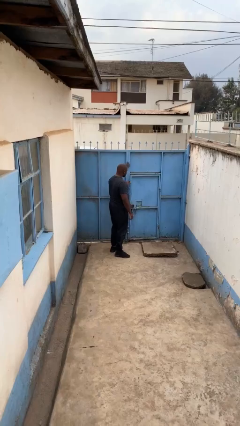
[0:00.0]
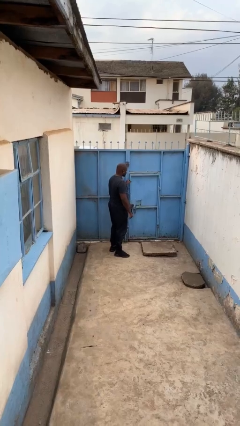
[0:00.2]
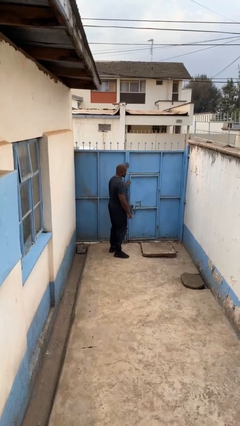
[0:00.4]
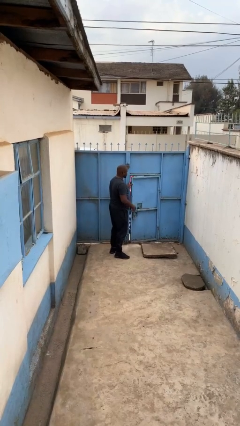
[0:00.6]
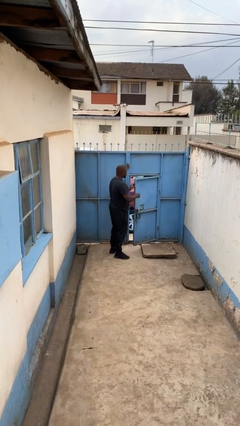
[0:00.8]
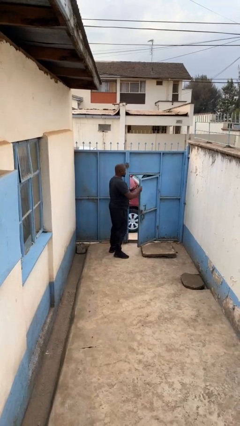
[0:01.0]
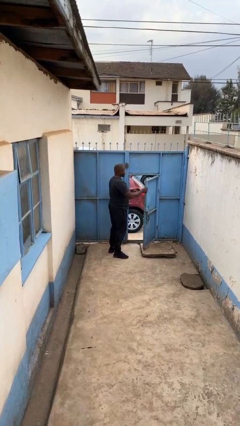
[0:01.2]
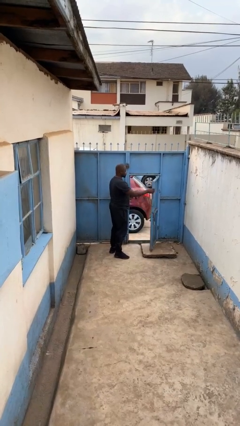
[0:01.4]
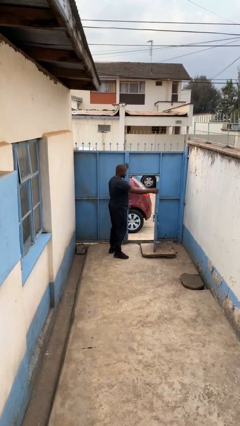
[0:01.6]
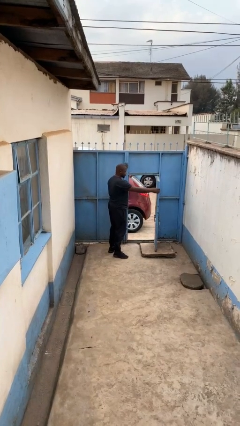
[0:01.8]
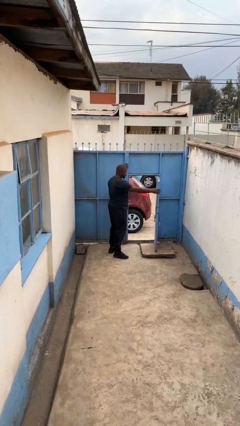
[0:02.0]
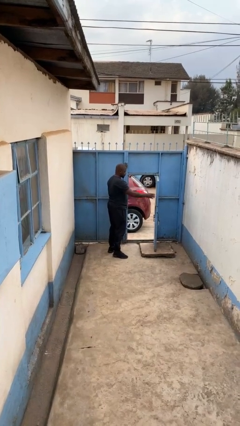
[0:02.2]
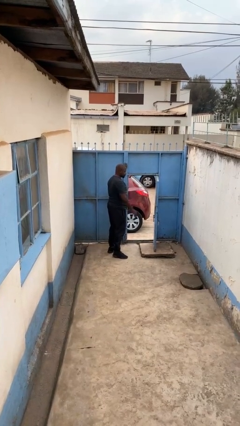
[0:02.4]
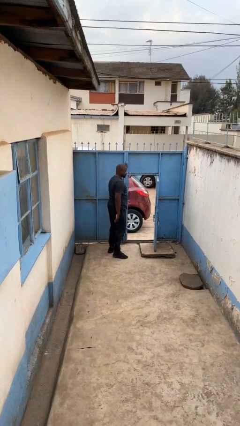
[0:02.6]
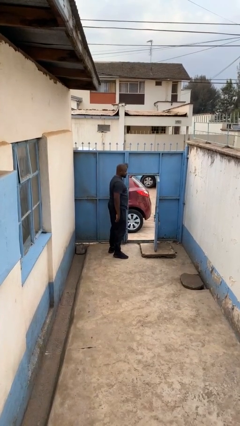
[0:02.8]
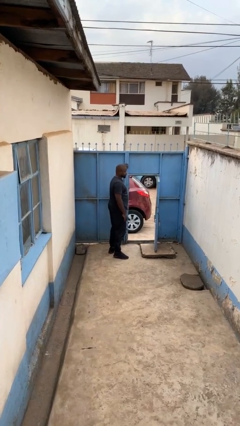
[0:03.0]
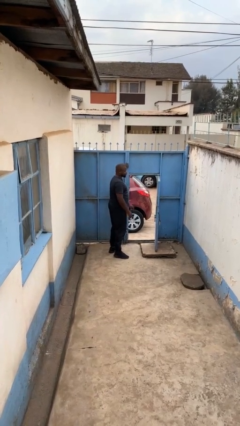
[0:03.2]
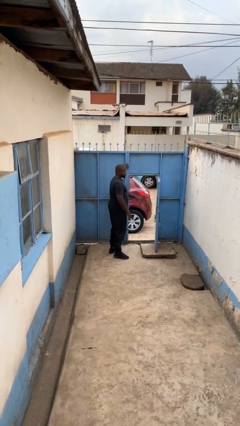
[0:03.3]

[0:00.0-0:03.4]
person opens gate

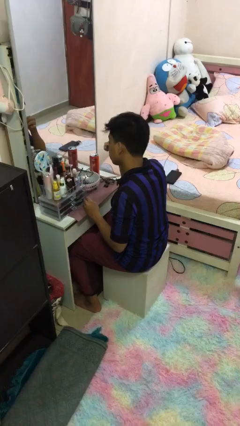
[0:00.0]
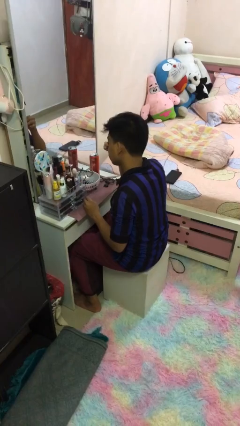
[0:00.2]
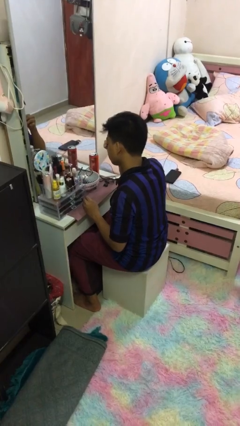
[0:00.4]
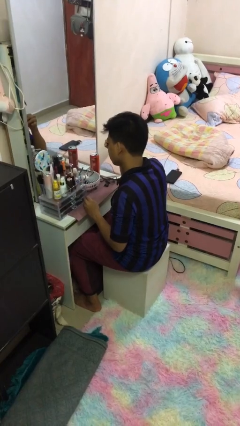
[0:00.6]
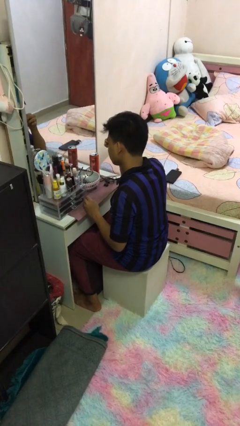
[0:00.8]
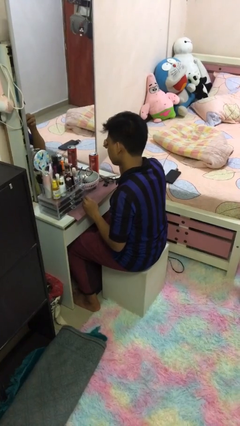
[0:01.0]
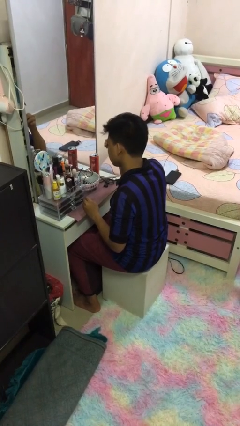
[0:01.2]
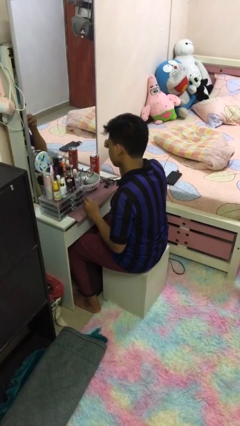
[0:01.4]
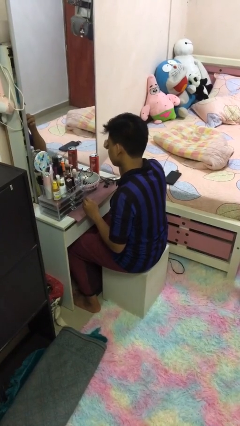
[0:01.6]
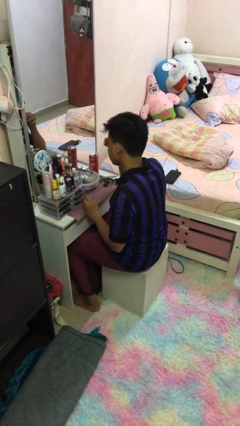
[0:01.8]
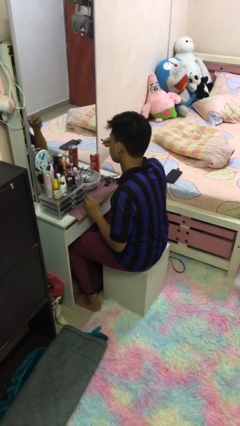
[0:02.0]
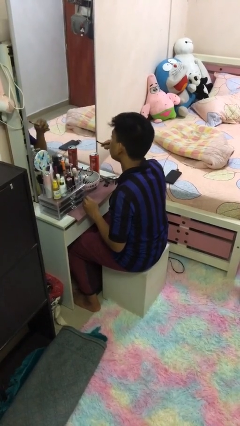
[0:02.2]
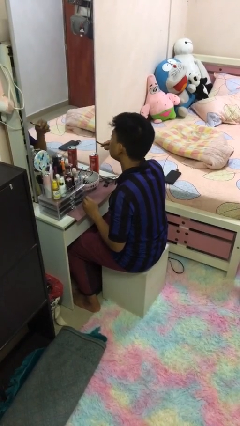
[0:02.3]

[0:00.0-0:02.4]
person applies eye makeup

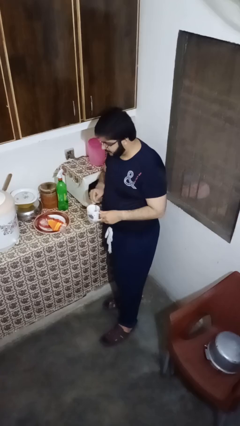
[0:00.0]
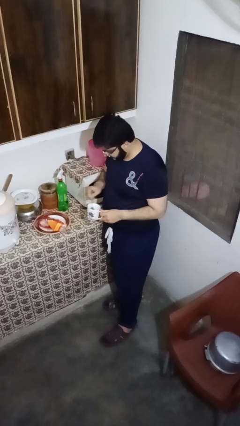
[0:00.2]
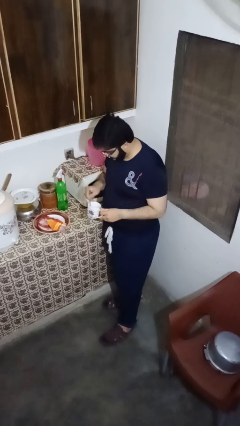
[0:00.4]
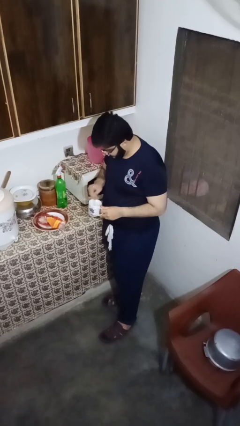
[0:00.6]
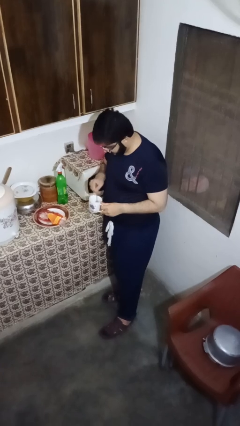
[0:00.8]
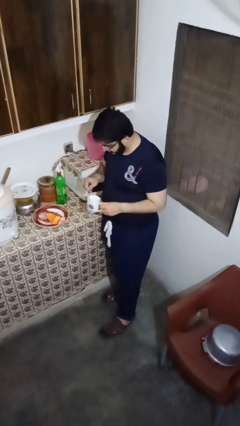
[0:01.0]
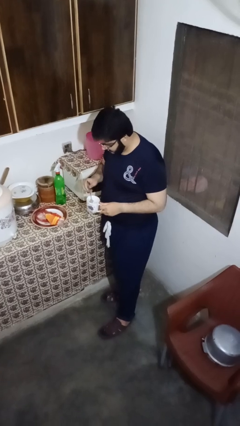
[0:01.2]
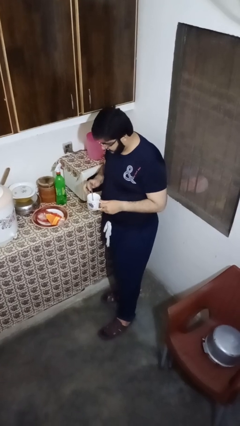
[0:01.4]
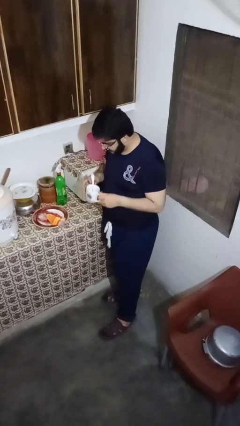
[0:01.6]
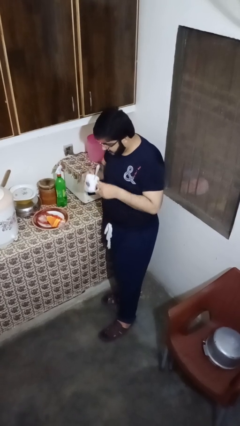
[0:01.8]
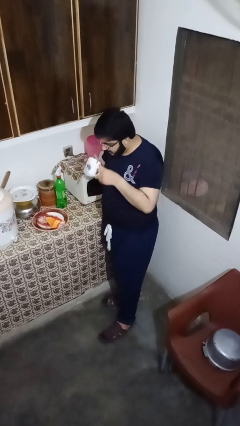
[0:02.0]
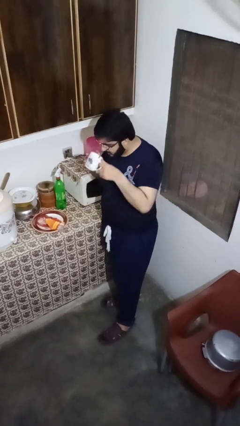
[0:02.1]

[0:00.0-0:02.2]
person stirs mug

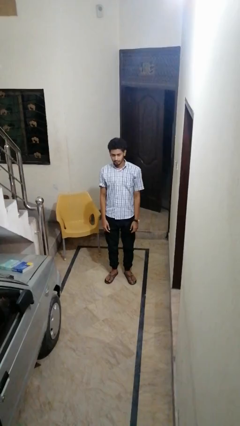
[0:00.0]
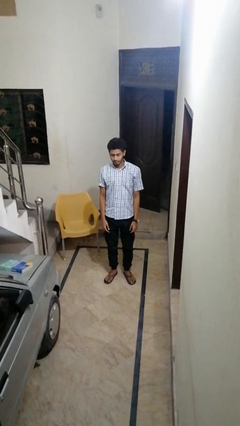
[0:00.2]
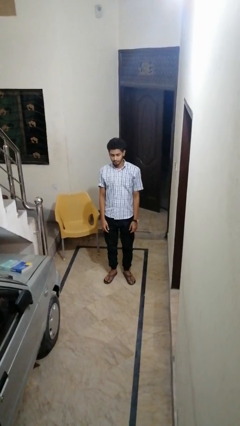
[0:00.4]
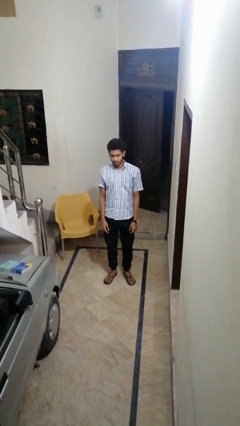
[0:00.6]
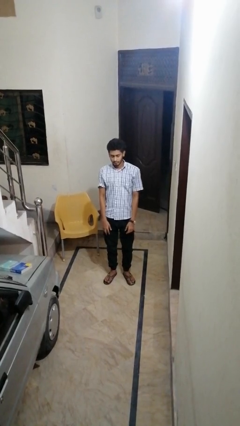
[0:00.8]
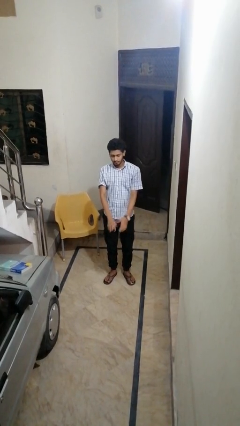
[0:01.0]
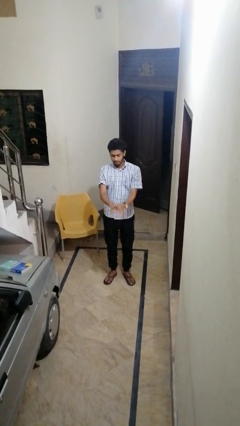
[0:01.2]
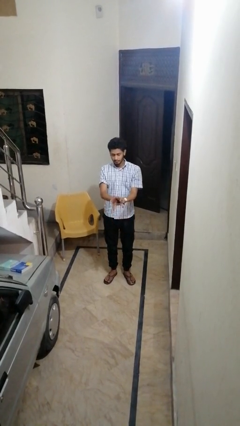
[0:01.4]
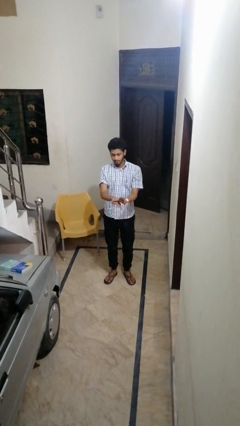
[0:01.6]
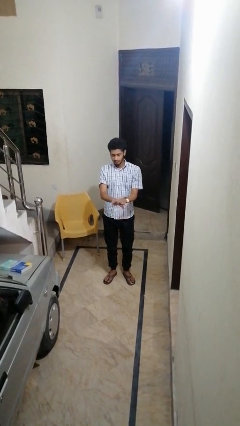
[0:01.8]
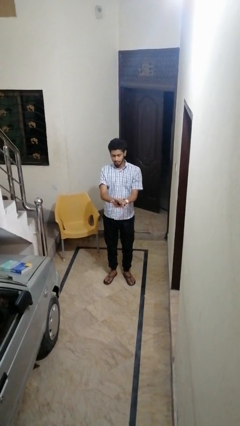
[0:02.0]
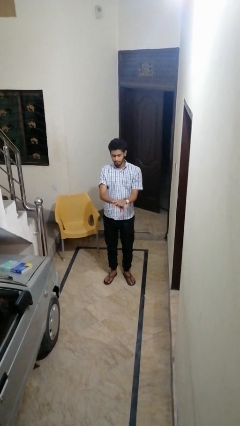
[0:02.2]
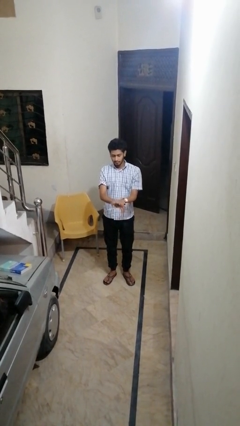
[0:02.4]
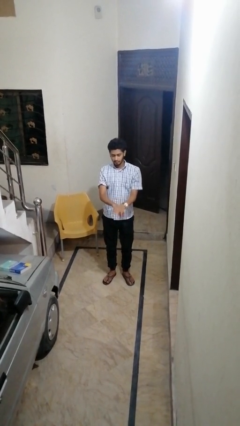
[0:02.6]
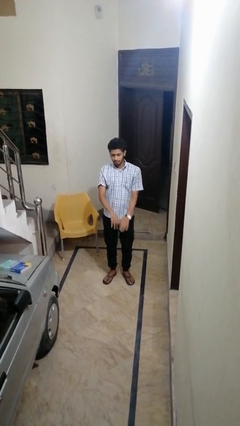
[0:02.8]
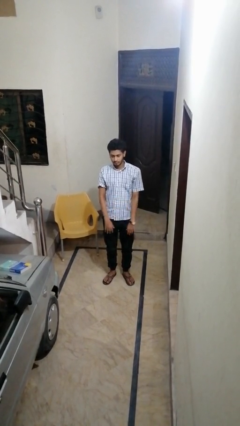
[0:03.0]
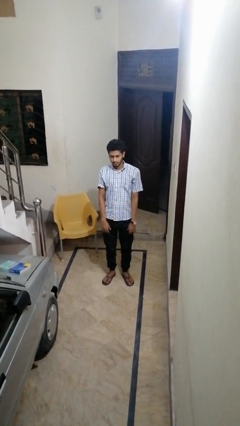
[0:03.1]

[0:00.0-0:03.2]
person cracks knuckles

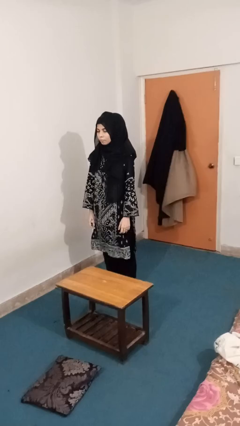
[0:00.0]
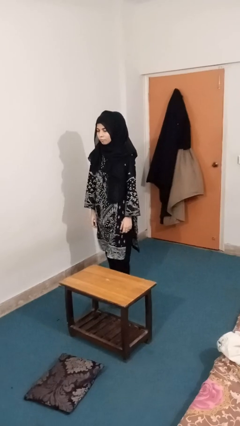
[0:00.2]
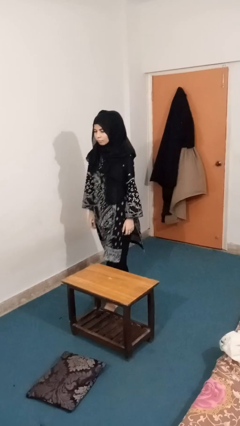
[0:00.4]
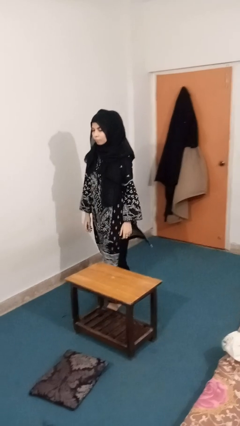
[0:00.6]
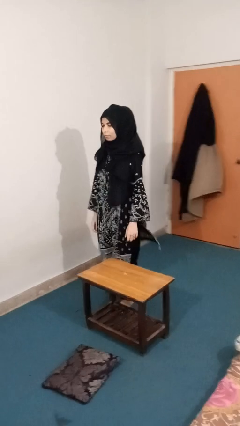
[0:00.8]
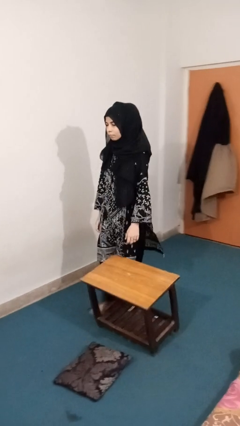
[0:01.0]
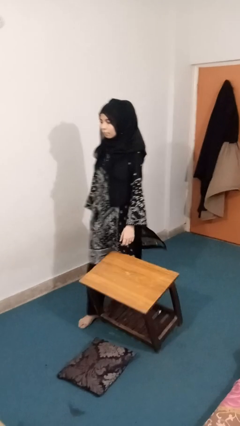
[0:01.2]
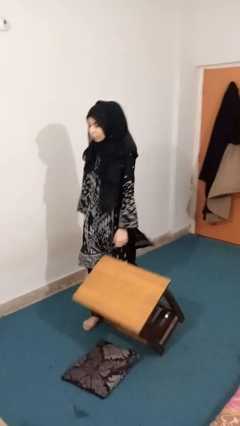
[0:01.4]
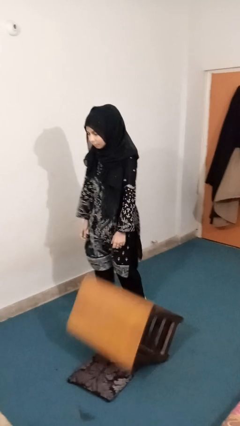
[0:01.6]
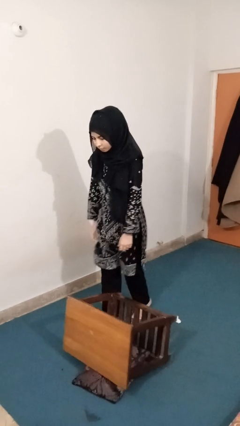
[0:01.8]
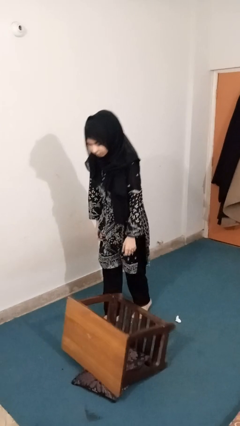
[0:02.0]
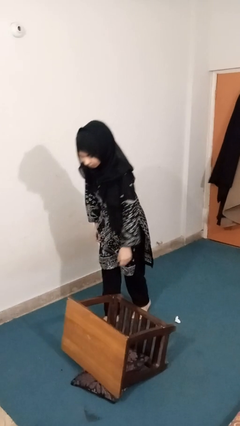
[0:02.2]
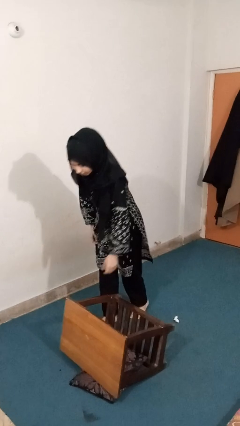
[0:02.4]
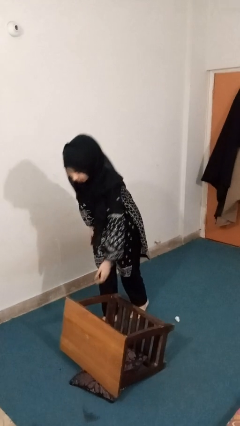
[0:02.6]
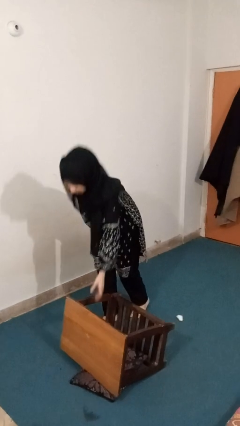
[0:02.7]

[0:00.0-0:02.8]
person knocks over furniture

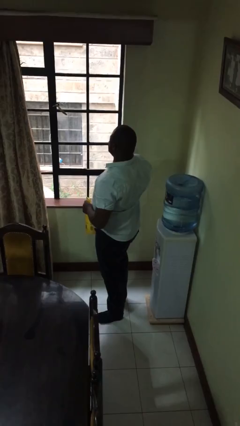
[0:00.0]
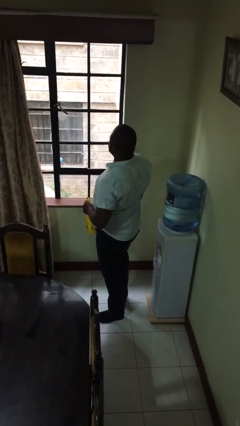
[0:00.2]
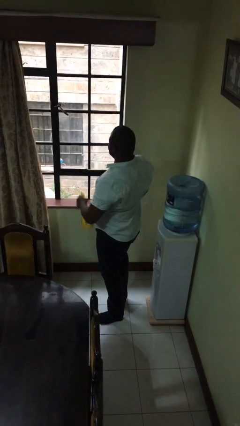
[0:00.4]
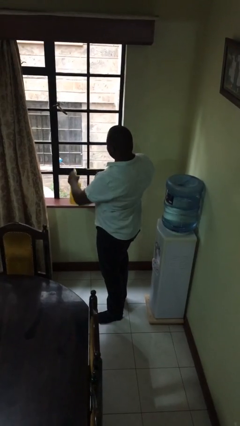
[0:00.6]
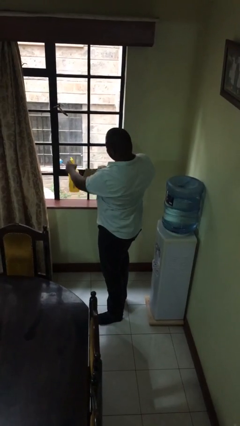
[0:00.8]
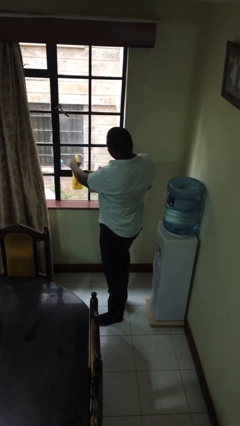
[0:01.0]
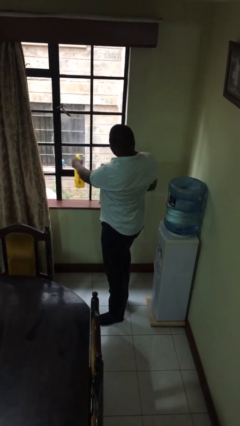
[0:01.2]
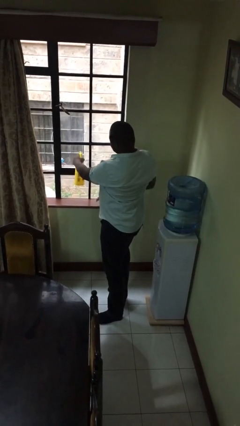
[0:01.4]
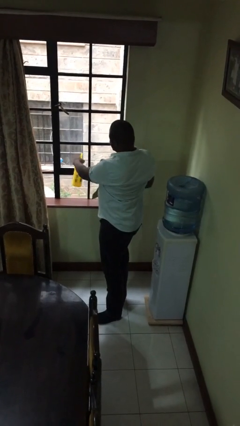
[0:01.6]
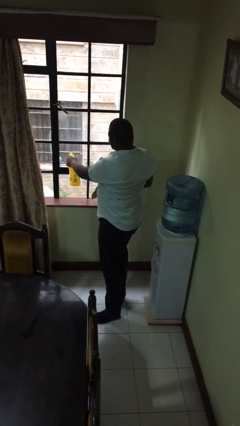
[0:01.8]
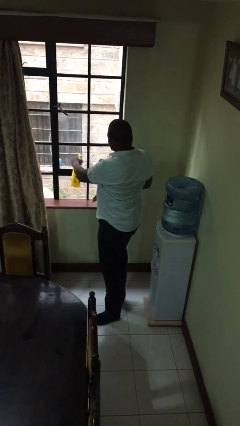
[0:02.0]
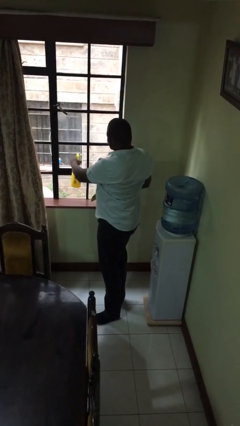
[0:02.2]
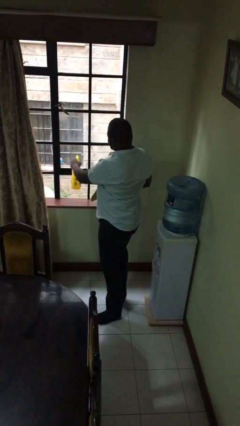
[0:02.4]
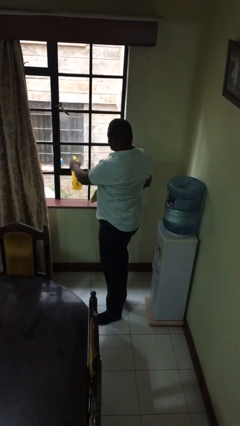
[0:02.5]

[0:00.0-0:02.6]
person sprays from bottle

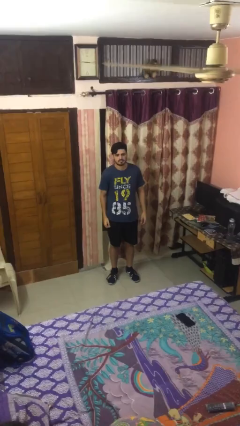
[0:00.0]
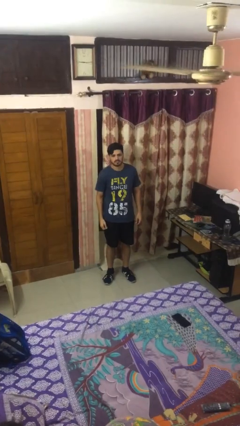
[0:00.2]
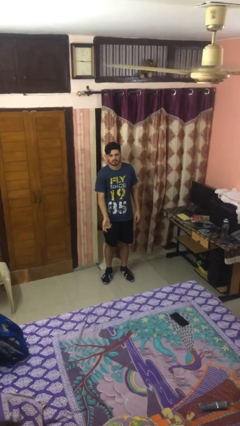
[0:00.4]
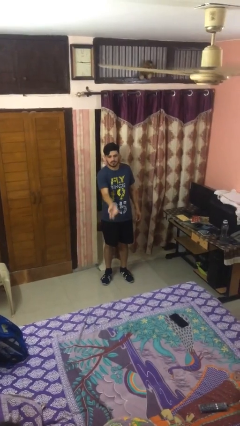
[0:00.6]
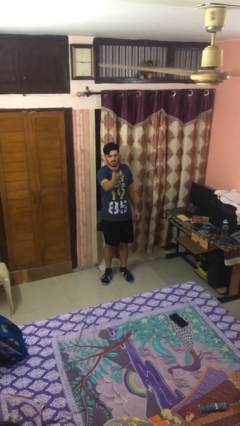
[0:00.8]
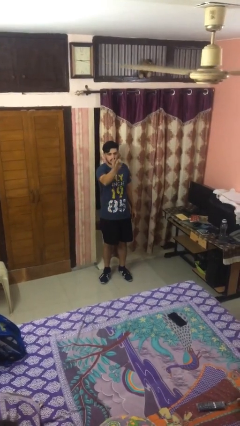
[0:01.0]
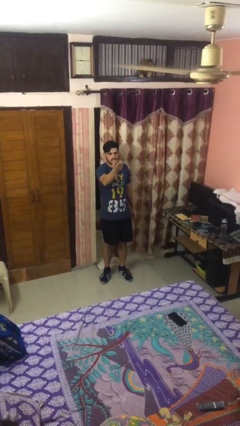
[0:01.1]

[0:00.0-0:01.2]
person gestures swipe up
